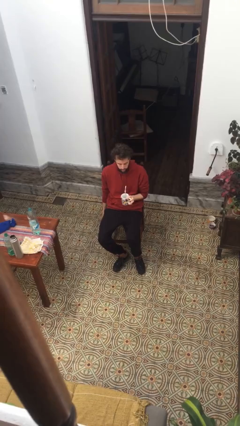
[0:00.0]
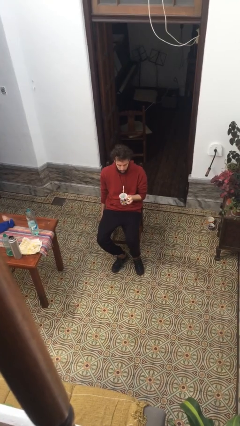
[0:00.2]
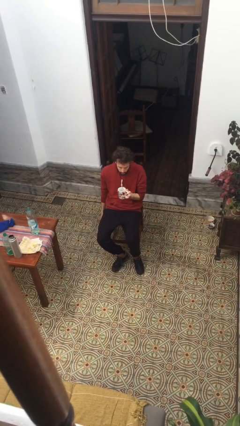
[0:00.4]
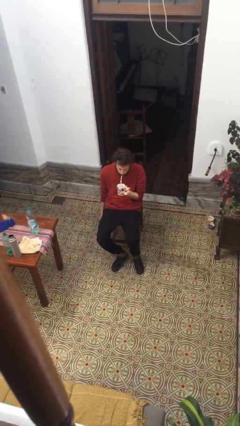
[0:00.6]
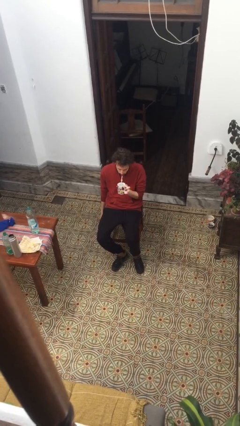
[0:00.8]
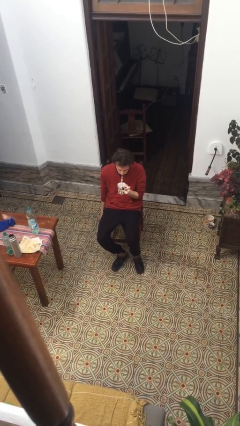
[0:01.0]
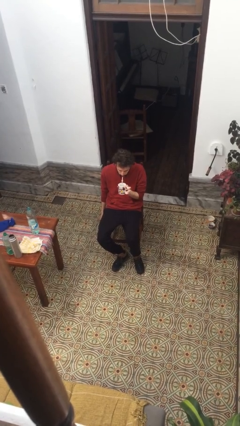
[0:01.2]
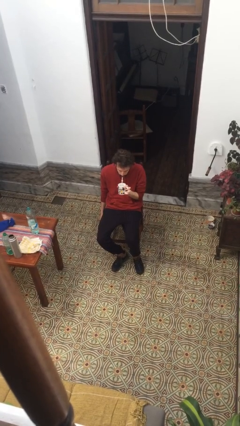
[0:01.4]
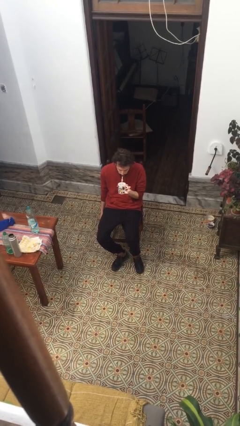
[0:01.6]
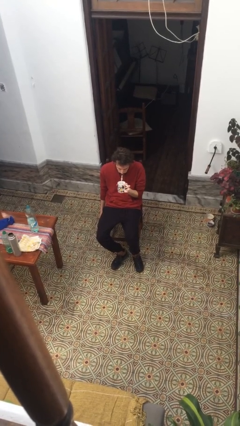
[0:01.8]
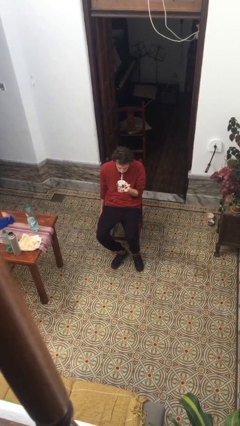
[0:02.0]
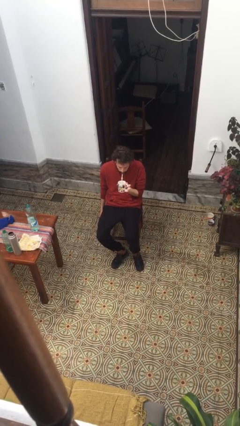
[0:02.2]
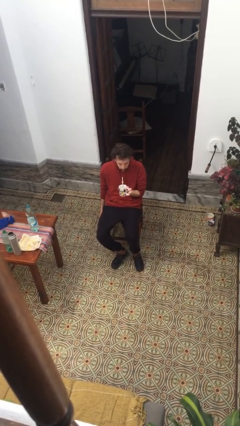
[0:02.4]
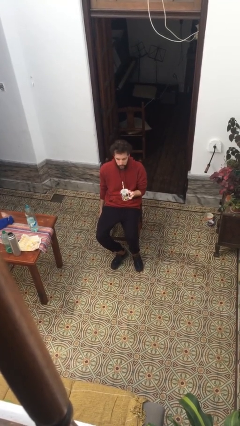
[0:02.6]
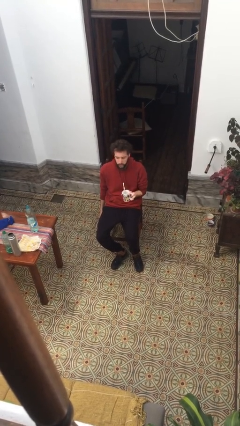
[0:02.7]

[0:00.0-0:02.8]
person drinks from straw

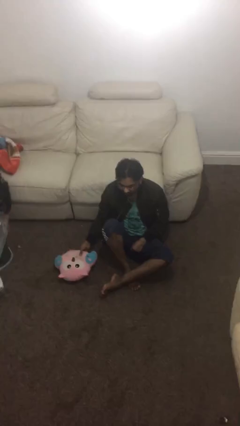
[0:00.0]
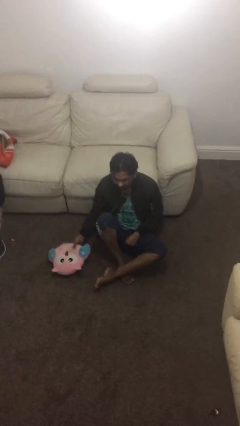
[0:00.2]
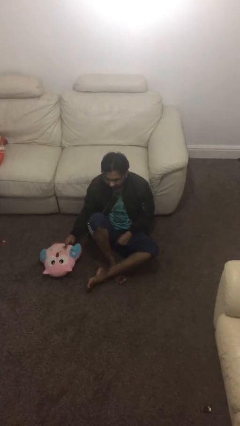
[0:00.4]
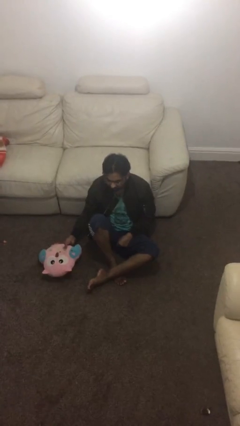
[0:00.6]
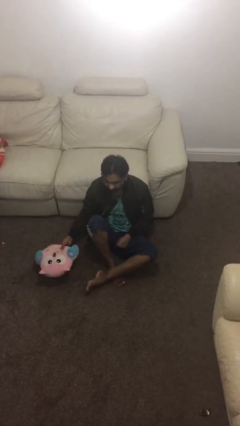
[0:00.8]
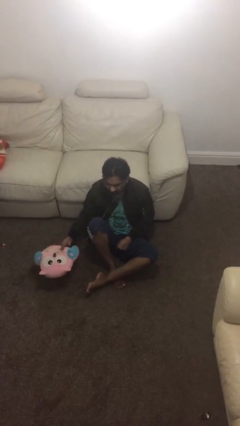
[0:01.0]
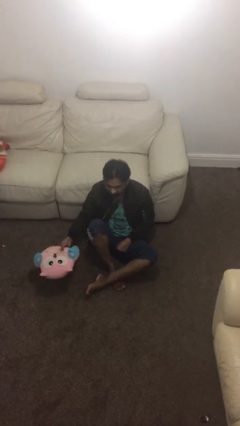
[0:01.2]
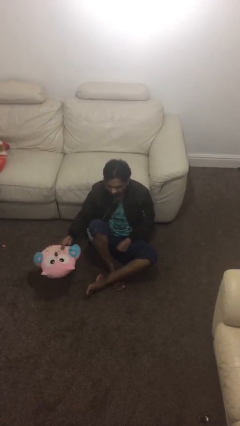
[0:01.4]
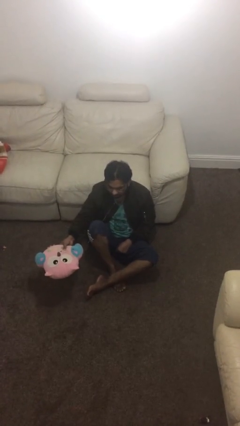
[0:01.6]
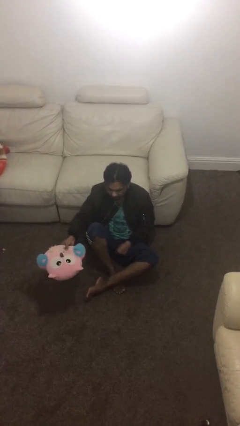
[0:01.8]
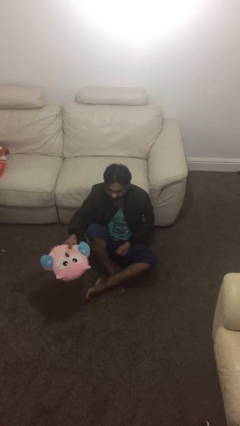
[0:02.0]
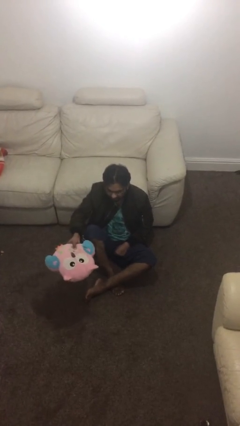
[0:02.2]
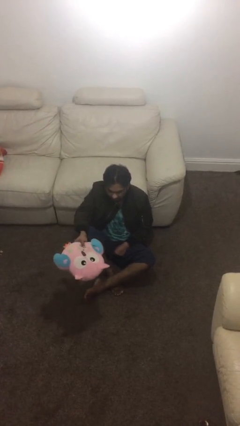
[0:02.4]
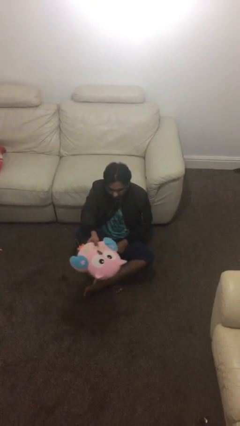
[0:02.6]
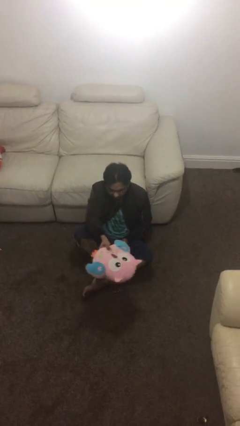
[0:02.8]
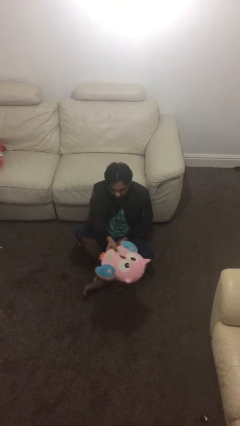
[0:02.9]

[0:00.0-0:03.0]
person picks up object from floor

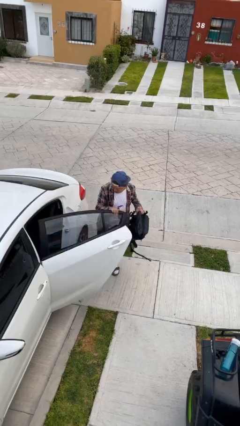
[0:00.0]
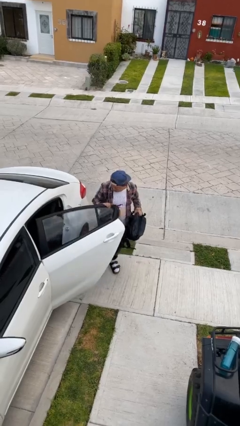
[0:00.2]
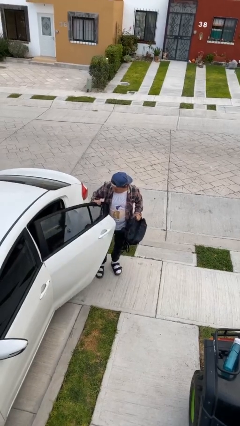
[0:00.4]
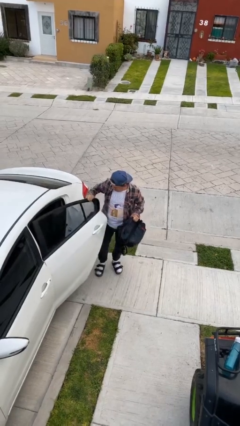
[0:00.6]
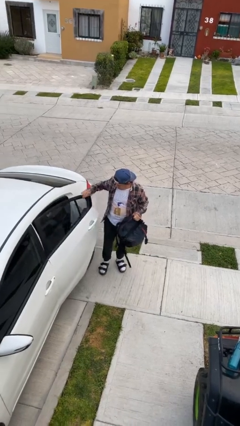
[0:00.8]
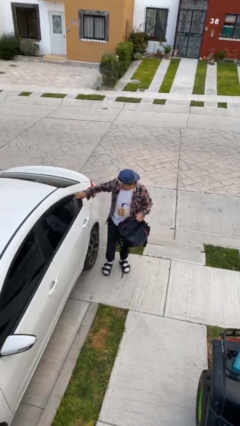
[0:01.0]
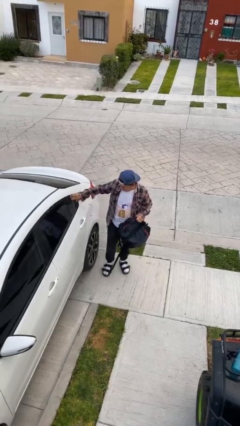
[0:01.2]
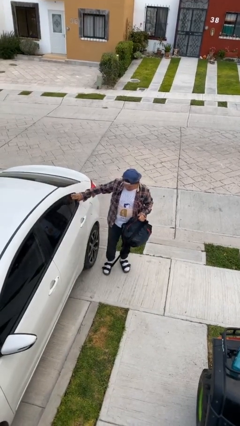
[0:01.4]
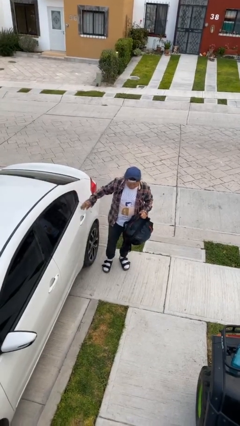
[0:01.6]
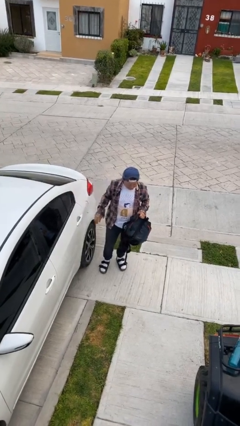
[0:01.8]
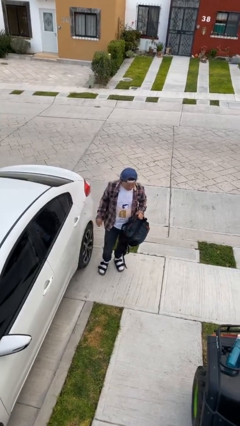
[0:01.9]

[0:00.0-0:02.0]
person closes car door

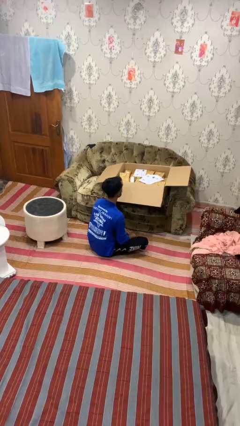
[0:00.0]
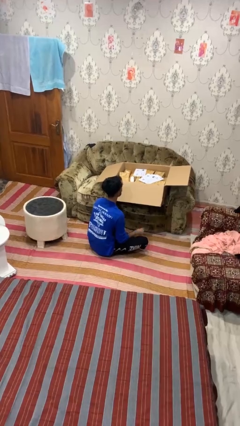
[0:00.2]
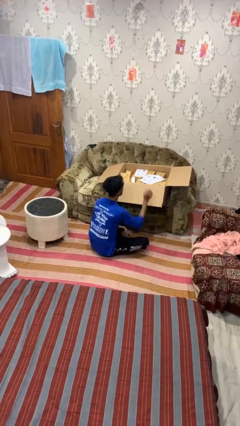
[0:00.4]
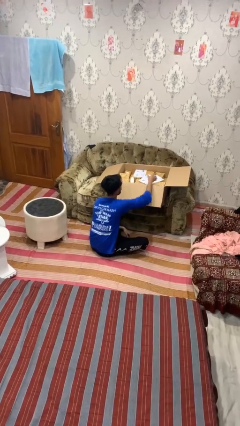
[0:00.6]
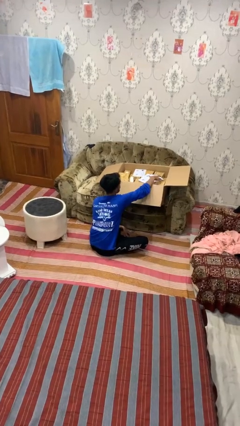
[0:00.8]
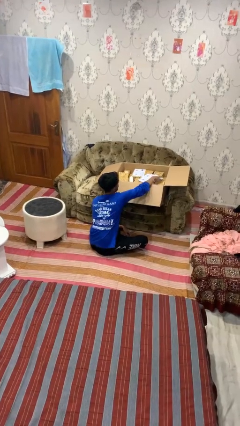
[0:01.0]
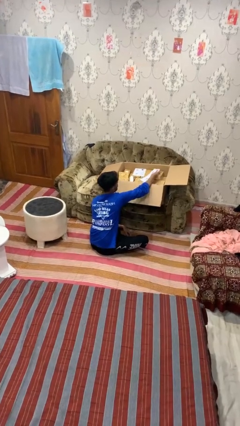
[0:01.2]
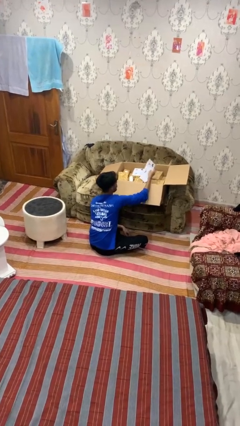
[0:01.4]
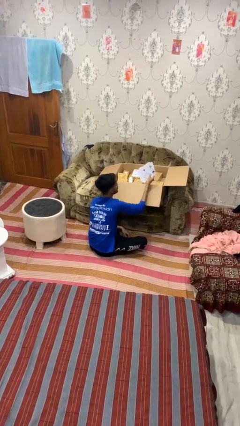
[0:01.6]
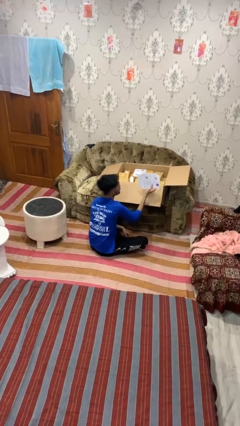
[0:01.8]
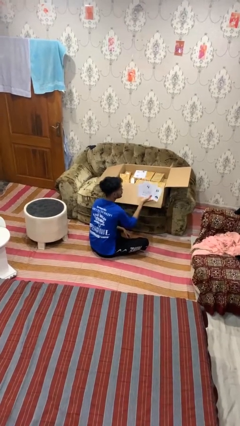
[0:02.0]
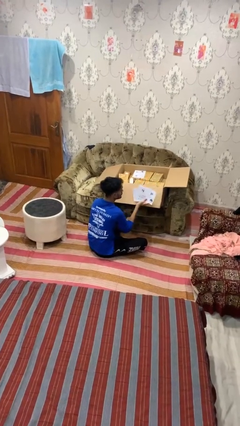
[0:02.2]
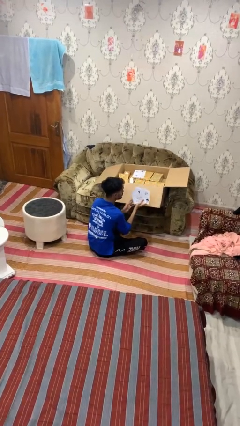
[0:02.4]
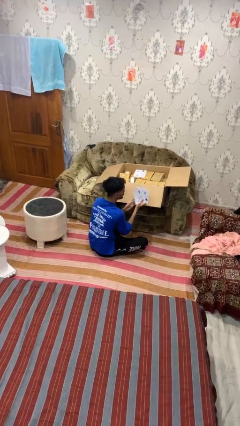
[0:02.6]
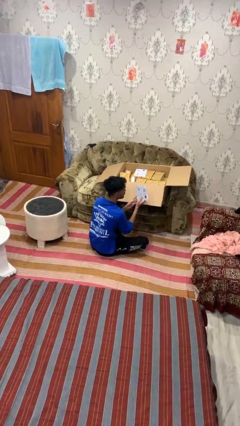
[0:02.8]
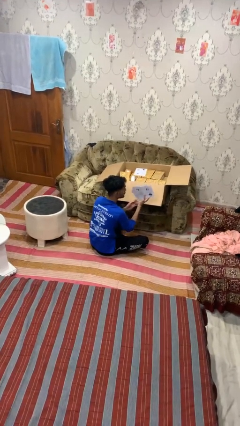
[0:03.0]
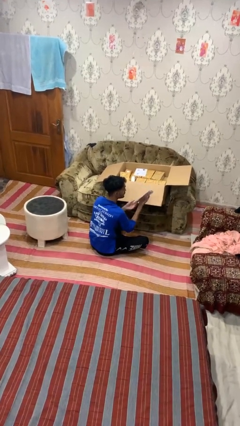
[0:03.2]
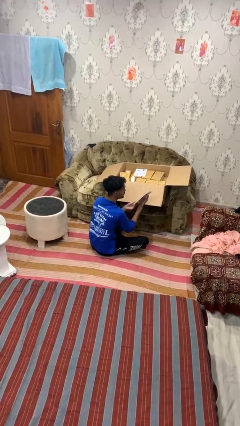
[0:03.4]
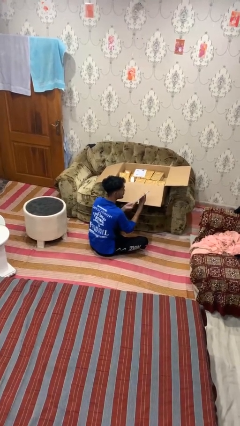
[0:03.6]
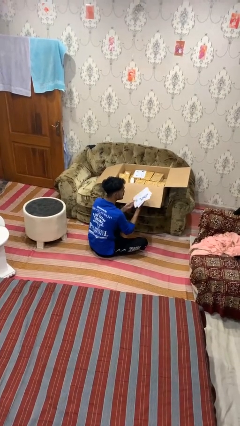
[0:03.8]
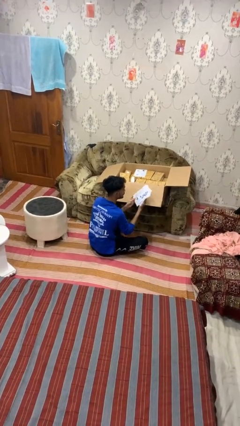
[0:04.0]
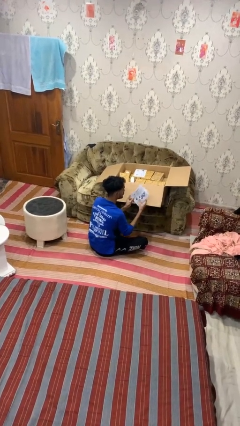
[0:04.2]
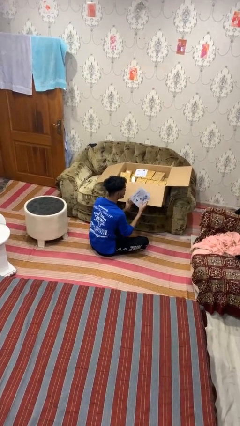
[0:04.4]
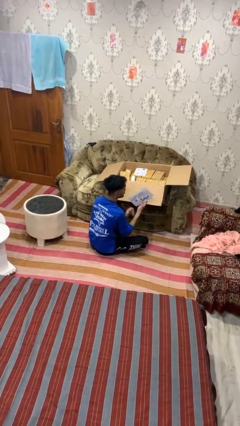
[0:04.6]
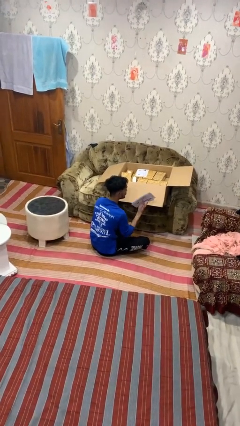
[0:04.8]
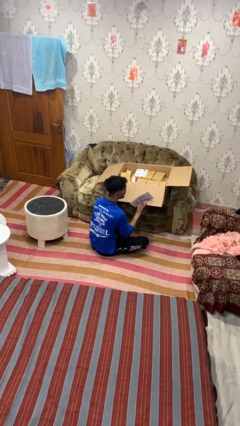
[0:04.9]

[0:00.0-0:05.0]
person takes object from box

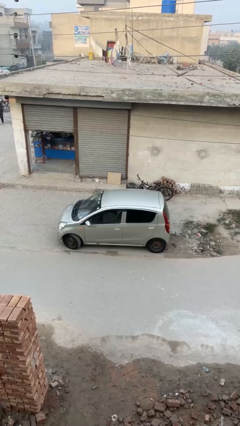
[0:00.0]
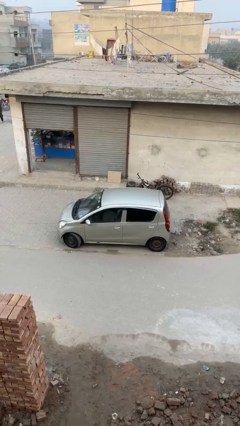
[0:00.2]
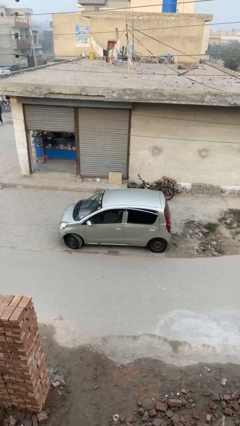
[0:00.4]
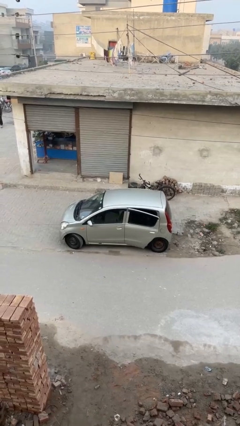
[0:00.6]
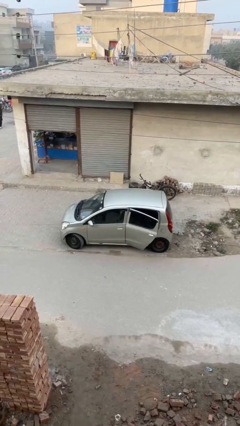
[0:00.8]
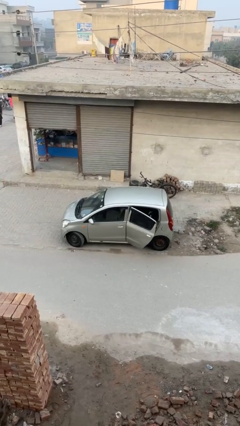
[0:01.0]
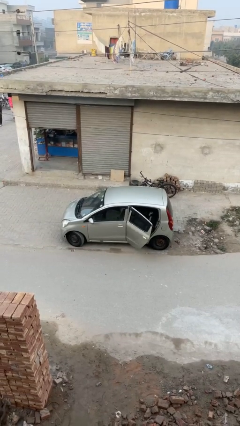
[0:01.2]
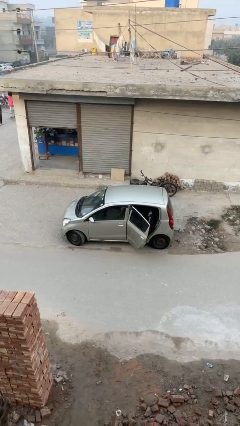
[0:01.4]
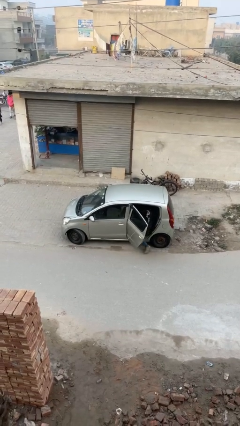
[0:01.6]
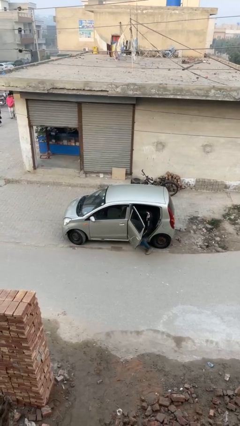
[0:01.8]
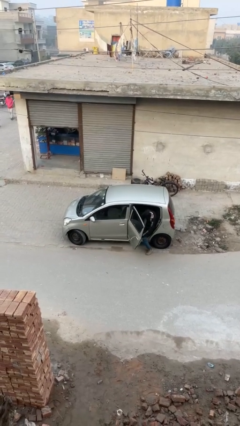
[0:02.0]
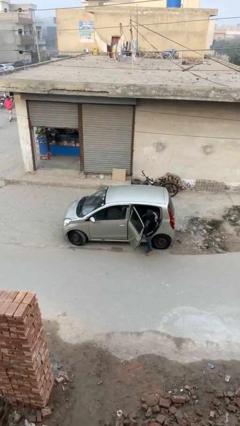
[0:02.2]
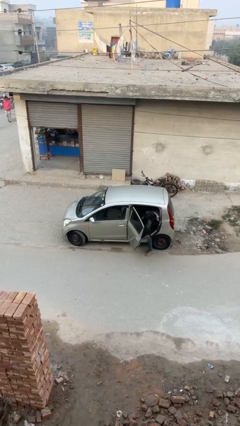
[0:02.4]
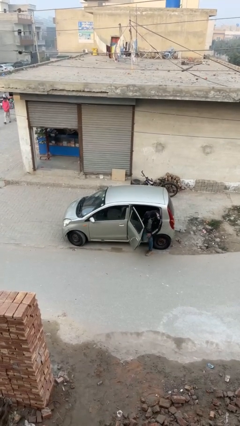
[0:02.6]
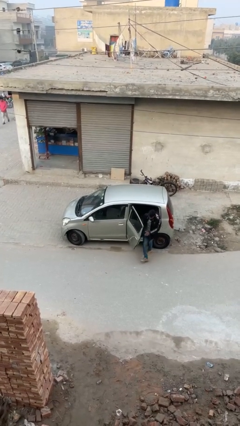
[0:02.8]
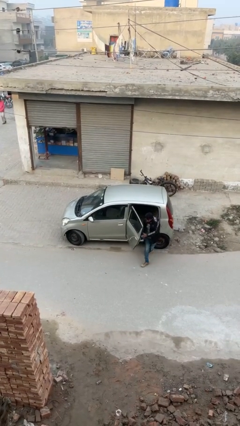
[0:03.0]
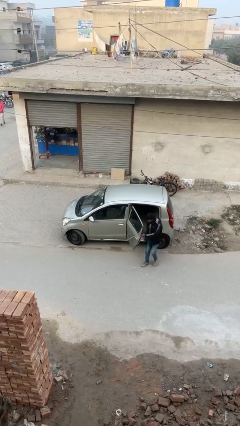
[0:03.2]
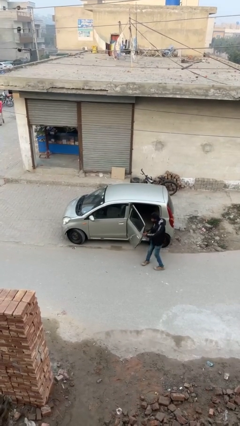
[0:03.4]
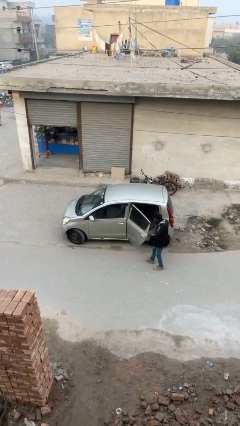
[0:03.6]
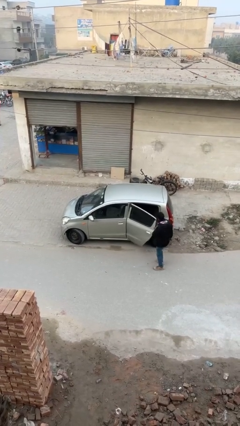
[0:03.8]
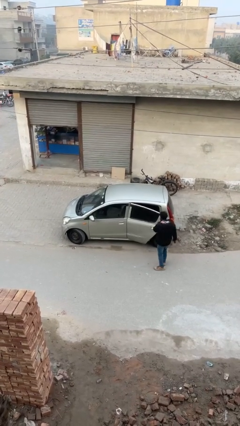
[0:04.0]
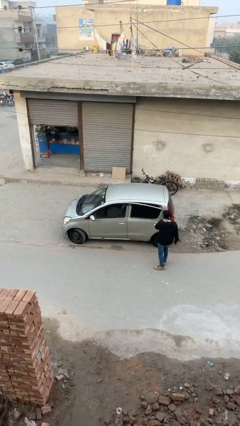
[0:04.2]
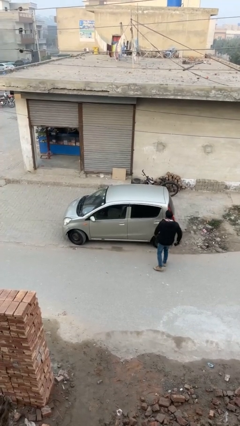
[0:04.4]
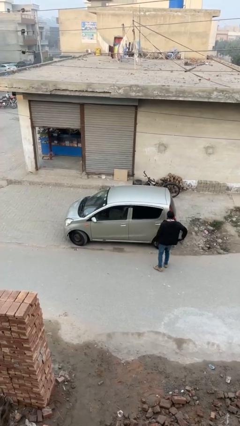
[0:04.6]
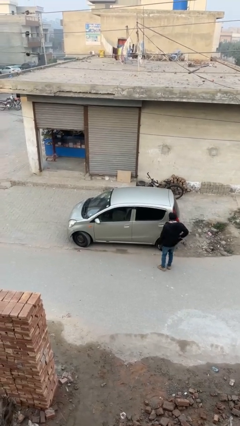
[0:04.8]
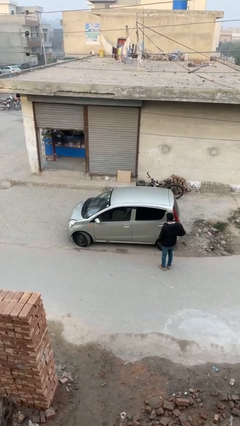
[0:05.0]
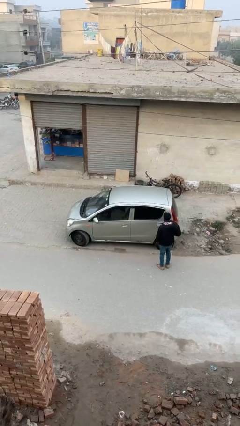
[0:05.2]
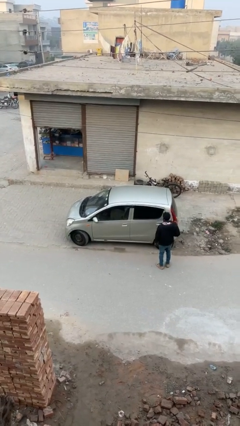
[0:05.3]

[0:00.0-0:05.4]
car drops off person
